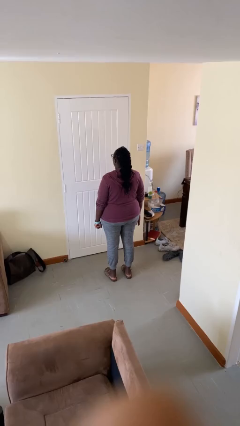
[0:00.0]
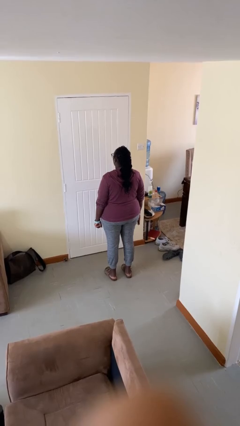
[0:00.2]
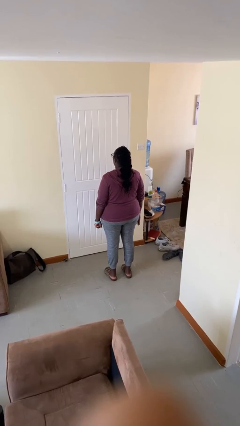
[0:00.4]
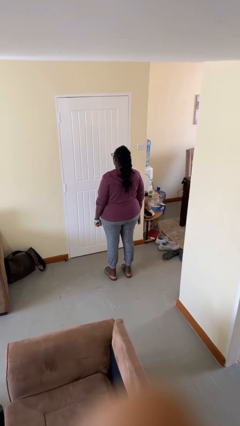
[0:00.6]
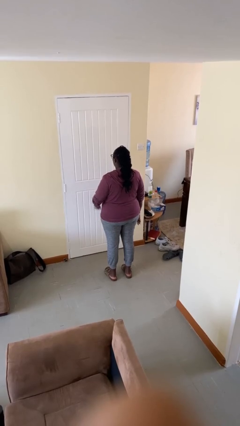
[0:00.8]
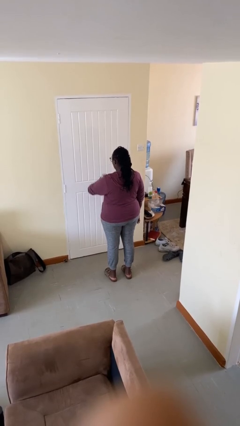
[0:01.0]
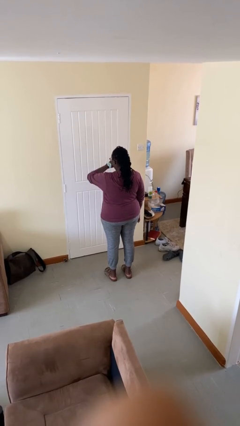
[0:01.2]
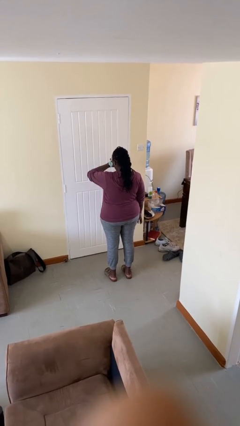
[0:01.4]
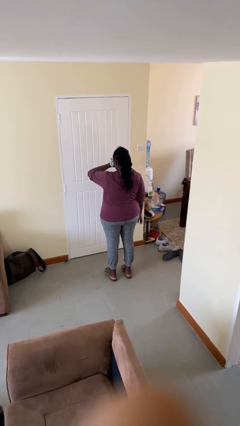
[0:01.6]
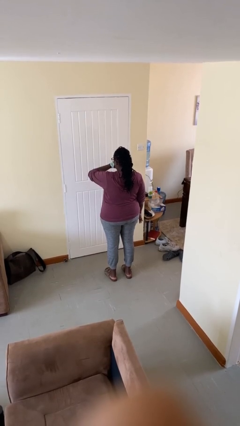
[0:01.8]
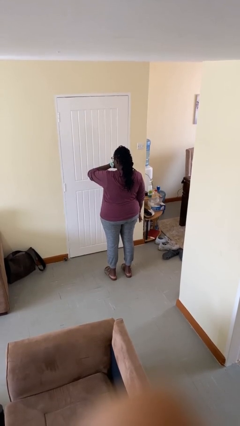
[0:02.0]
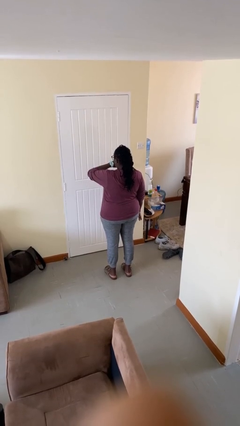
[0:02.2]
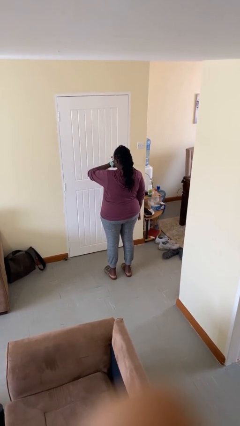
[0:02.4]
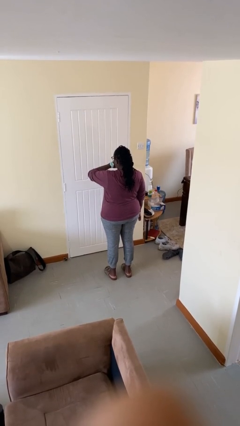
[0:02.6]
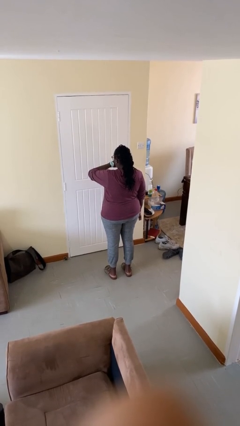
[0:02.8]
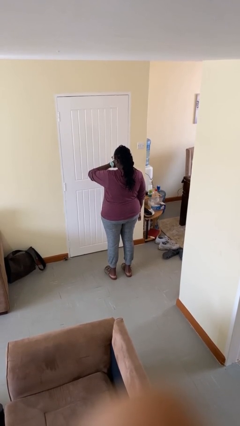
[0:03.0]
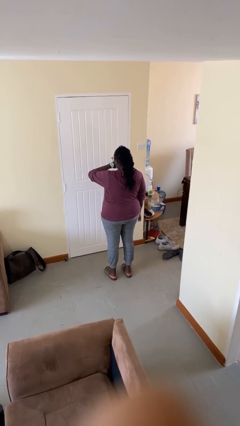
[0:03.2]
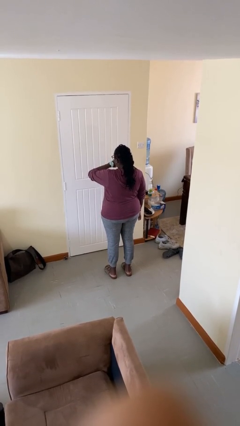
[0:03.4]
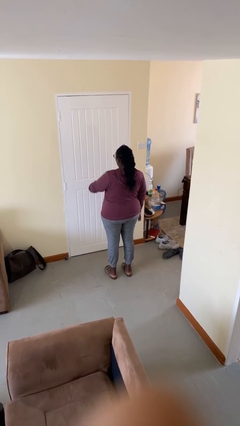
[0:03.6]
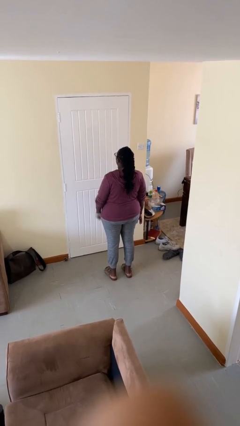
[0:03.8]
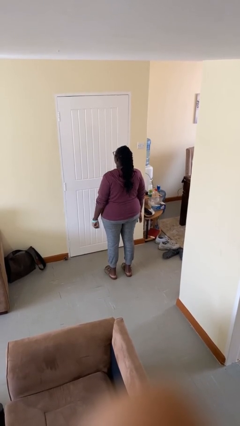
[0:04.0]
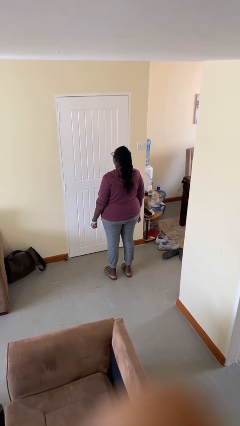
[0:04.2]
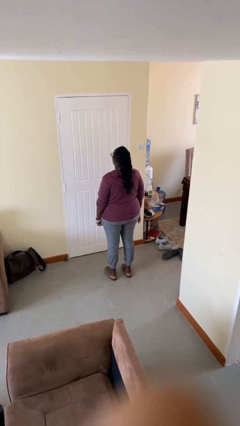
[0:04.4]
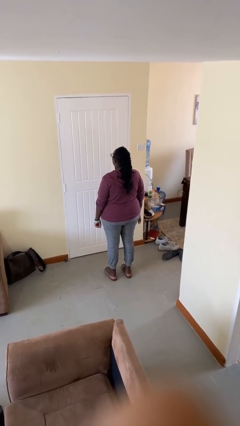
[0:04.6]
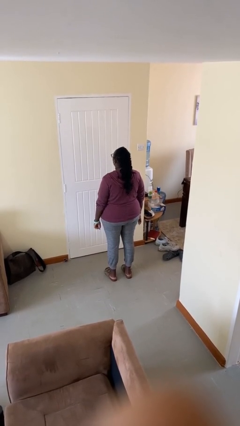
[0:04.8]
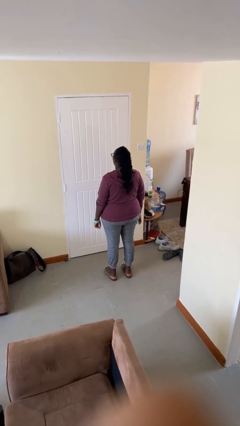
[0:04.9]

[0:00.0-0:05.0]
person looks at wristwatch

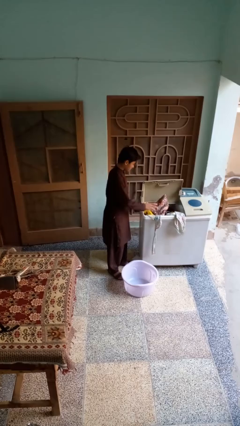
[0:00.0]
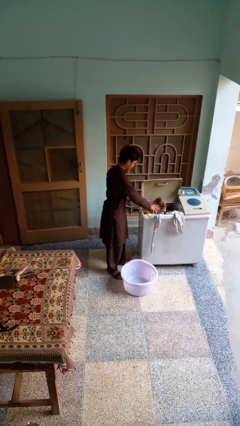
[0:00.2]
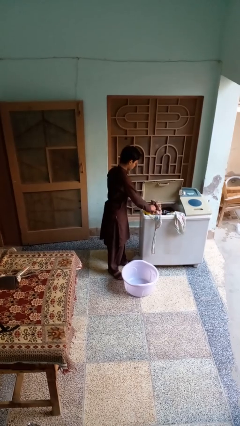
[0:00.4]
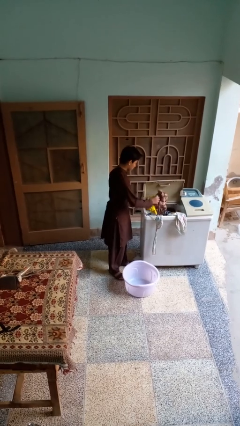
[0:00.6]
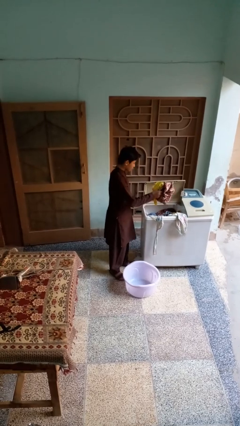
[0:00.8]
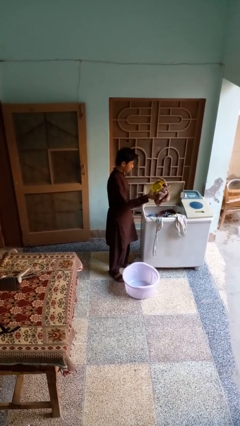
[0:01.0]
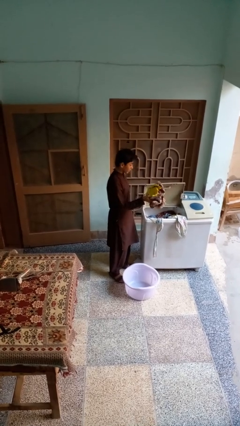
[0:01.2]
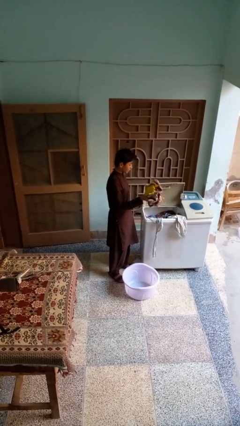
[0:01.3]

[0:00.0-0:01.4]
person loads clotheswasher

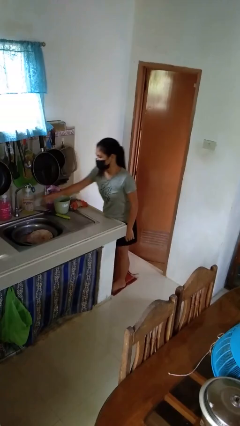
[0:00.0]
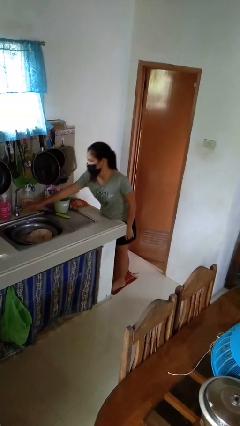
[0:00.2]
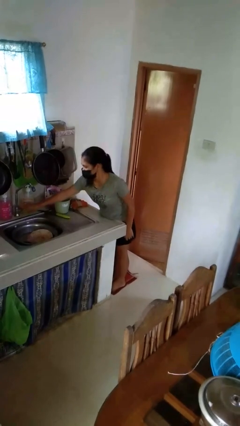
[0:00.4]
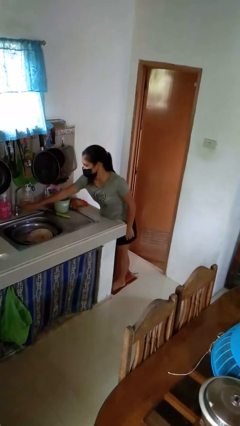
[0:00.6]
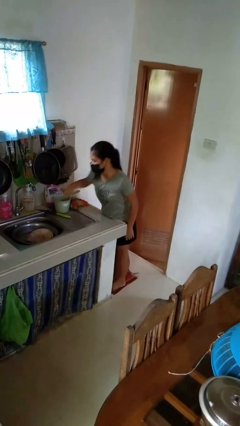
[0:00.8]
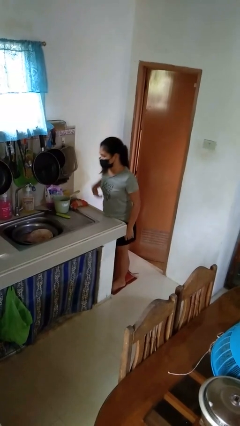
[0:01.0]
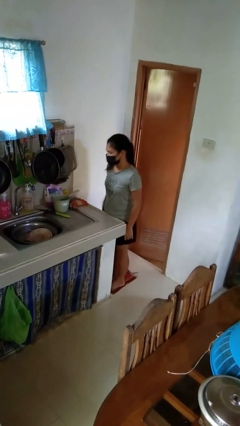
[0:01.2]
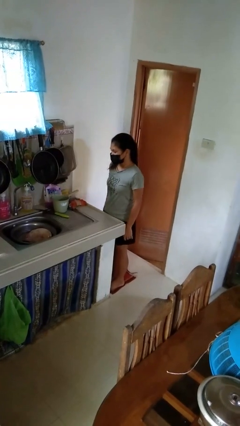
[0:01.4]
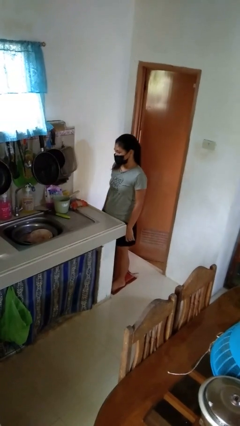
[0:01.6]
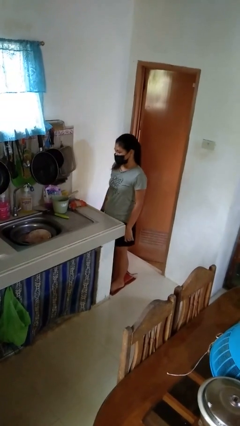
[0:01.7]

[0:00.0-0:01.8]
person turns off faucet

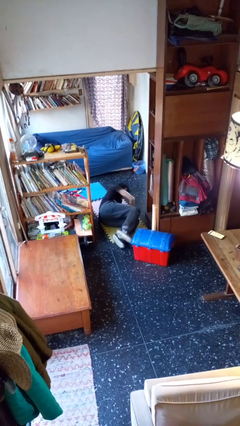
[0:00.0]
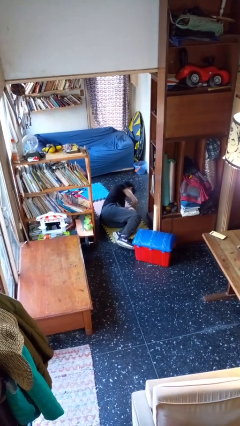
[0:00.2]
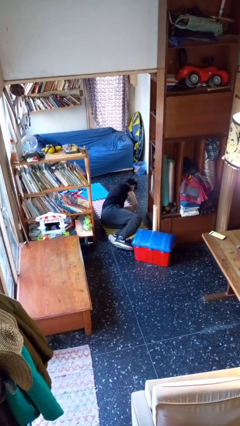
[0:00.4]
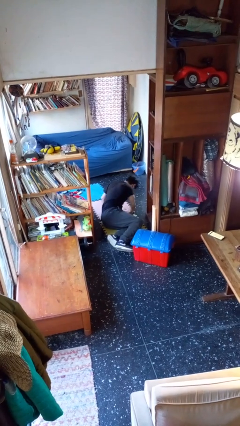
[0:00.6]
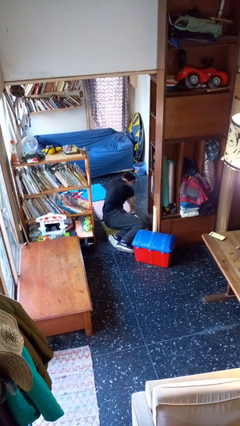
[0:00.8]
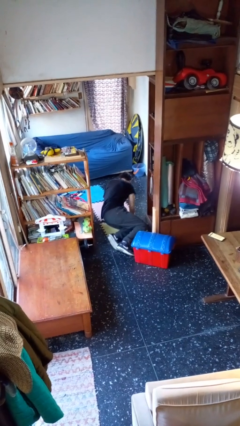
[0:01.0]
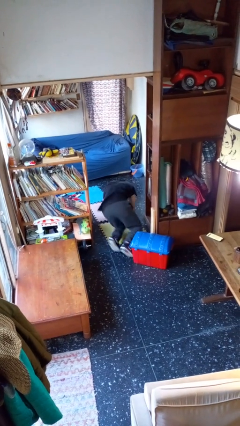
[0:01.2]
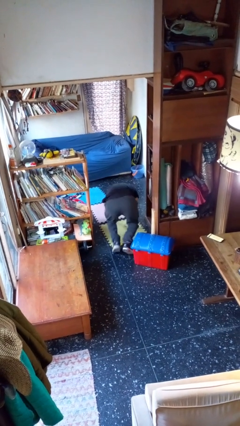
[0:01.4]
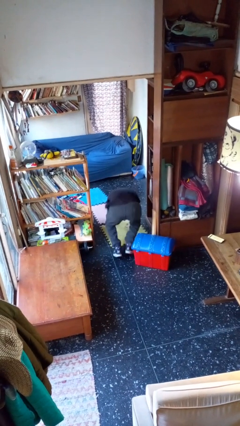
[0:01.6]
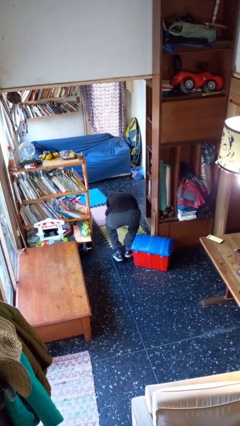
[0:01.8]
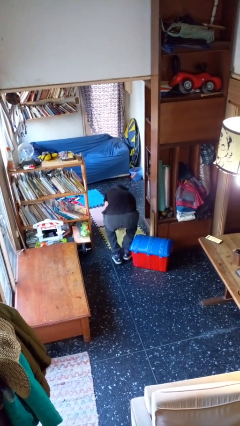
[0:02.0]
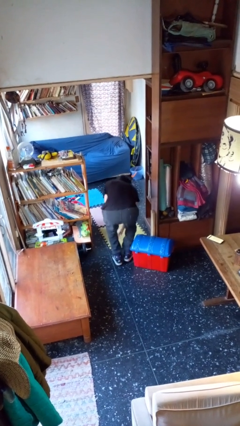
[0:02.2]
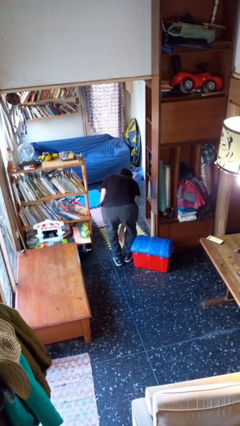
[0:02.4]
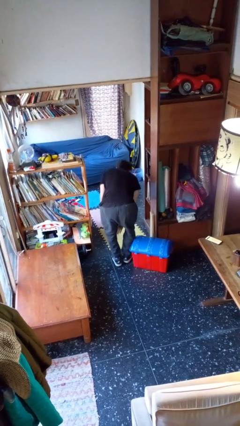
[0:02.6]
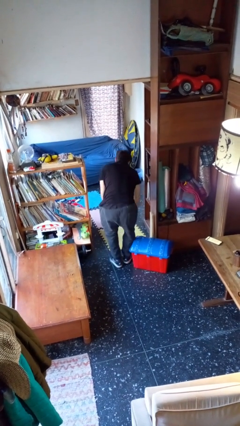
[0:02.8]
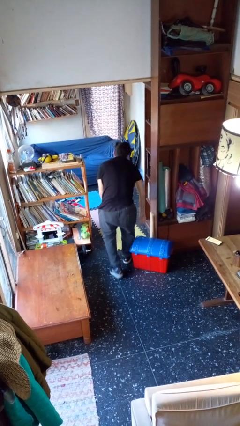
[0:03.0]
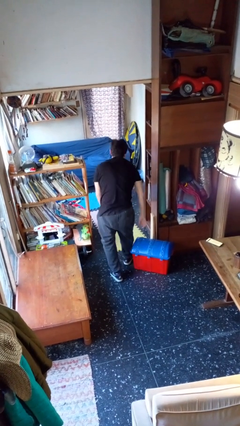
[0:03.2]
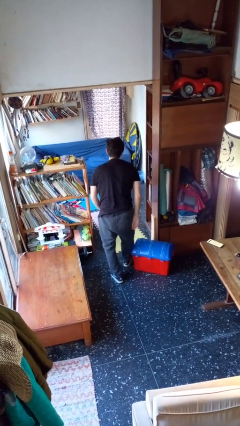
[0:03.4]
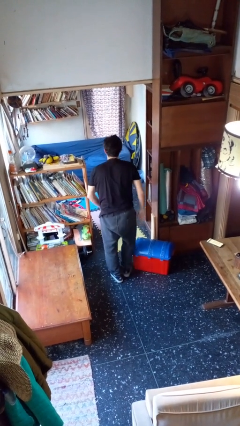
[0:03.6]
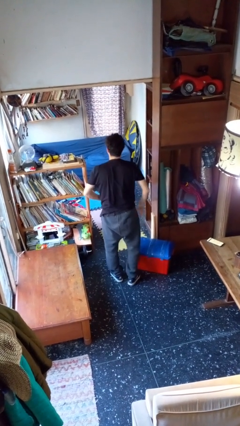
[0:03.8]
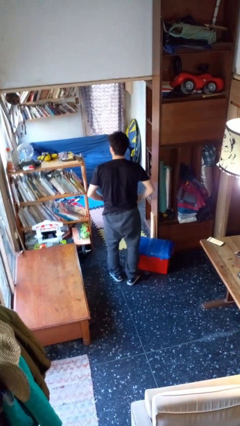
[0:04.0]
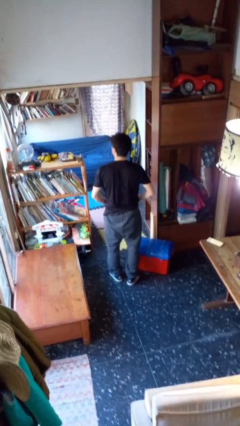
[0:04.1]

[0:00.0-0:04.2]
person stands up from floor

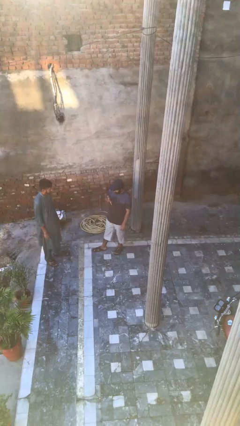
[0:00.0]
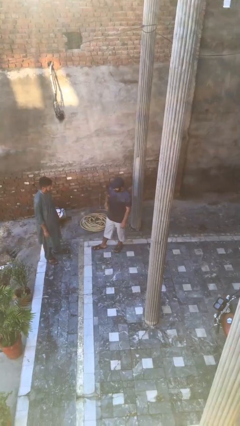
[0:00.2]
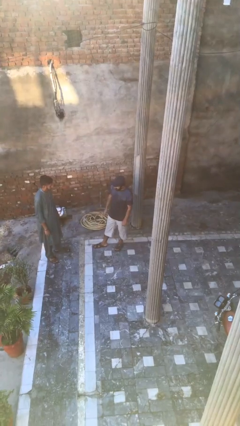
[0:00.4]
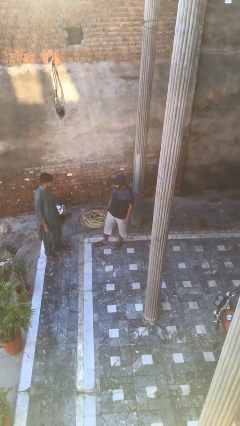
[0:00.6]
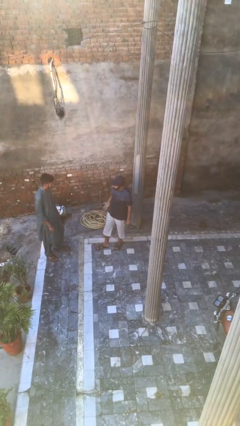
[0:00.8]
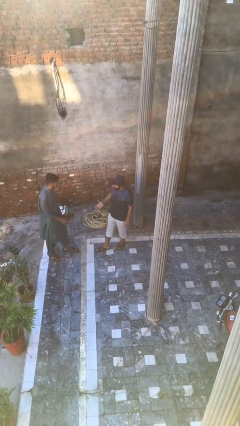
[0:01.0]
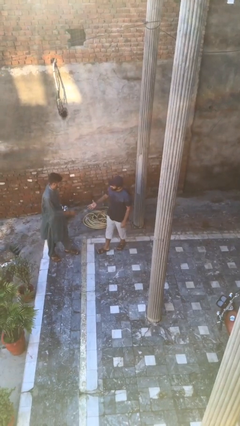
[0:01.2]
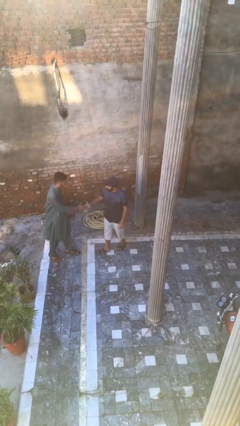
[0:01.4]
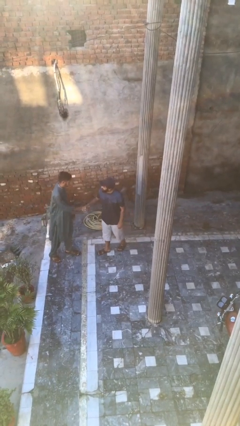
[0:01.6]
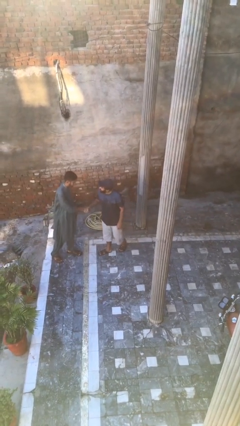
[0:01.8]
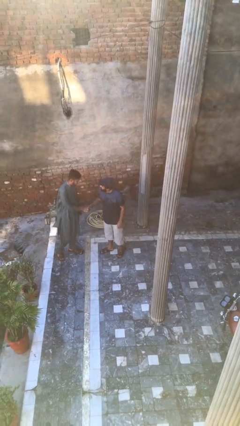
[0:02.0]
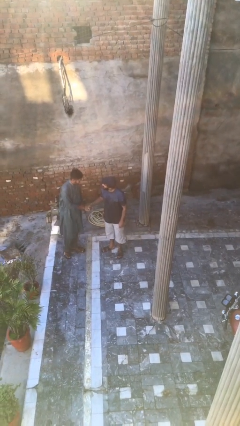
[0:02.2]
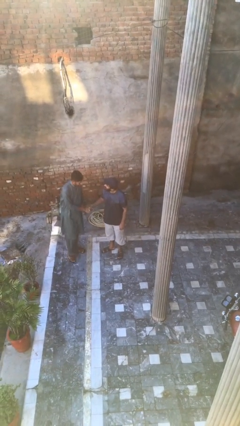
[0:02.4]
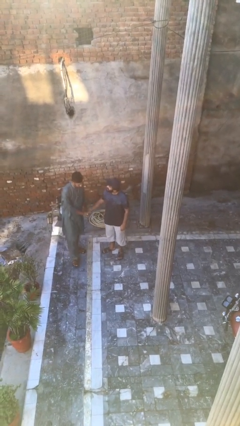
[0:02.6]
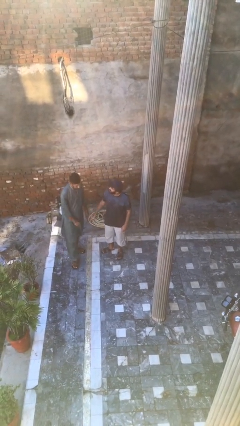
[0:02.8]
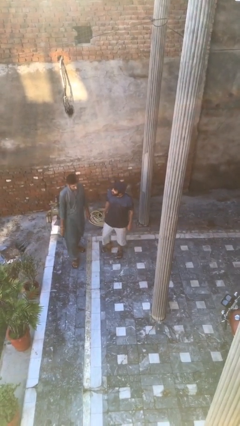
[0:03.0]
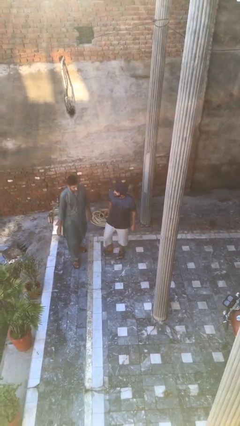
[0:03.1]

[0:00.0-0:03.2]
person shakes hand

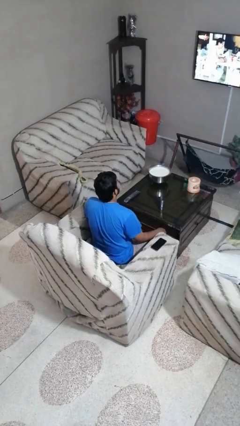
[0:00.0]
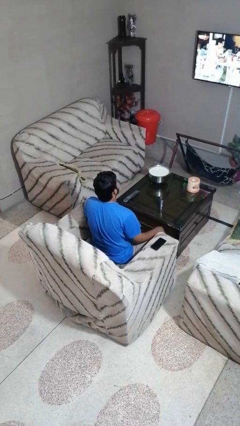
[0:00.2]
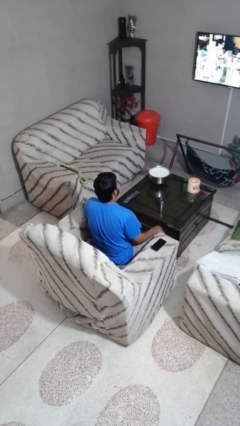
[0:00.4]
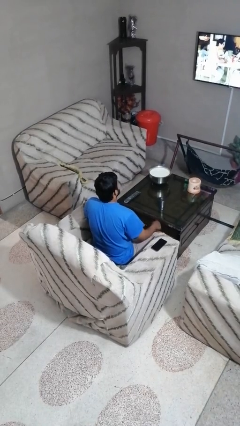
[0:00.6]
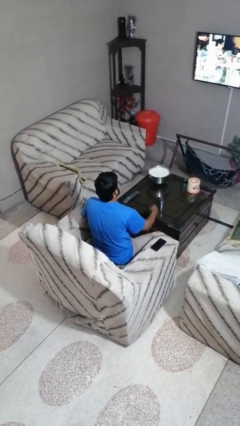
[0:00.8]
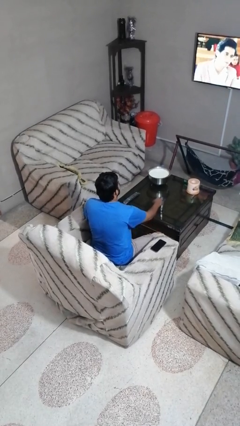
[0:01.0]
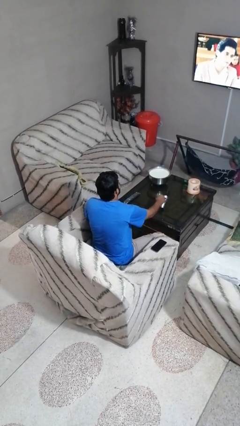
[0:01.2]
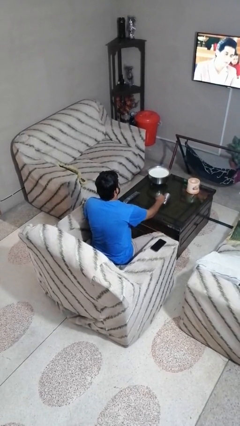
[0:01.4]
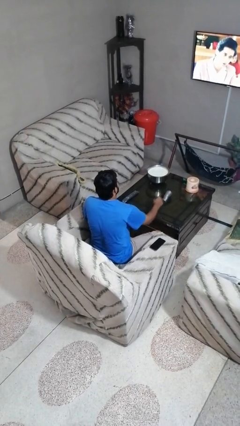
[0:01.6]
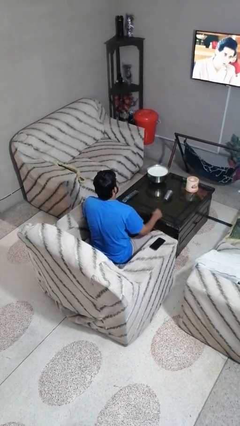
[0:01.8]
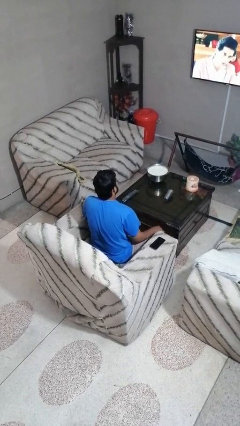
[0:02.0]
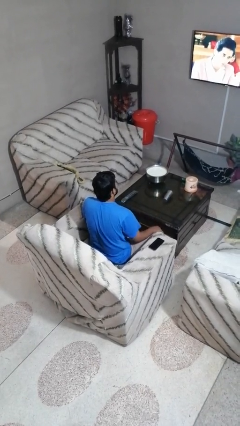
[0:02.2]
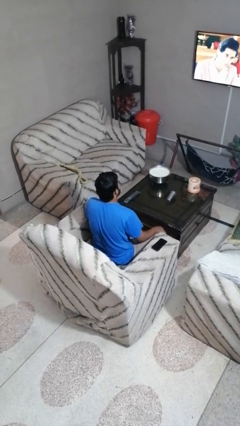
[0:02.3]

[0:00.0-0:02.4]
person knocks over glass
